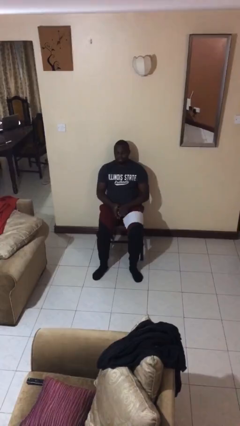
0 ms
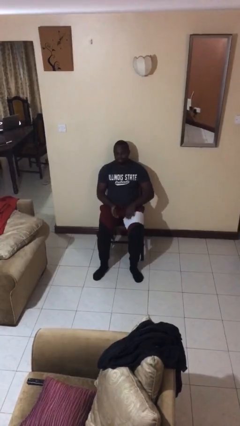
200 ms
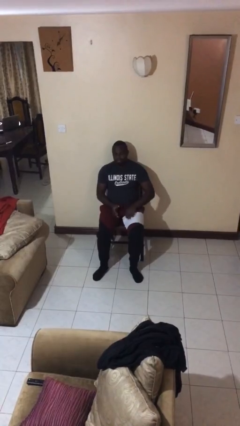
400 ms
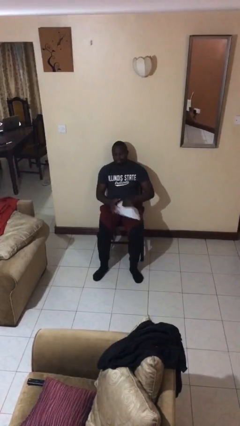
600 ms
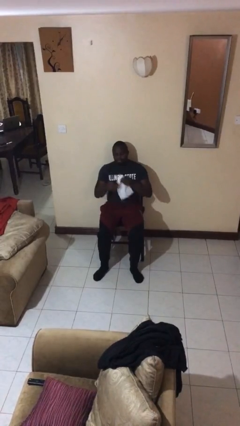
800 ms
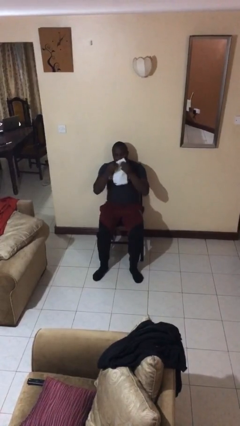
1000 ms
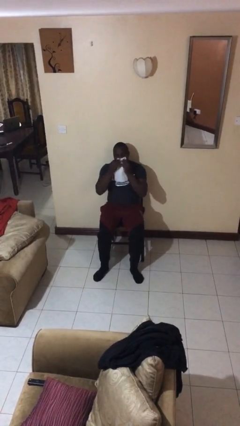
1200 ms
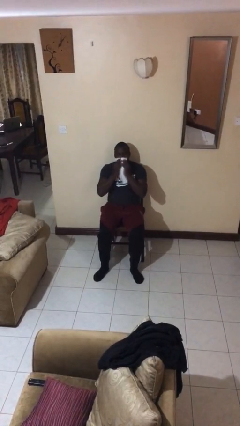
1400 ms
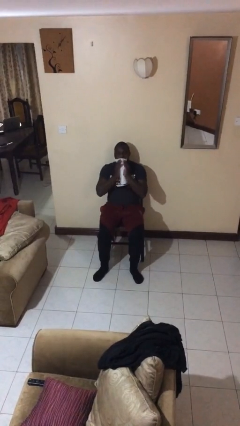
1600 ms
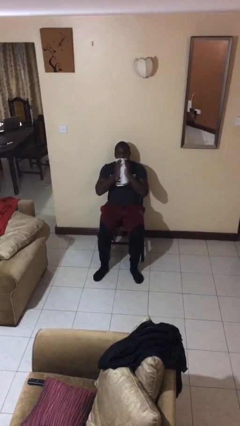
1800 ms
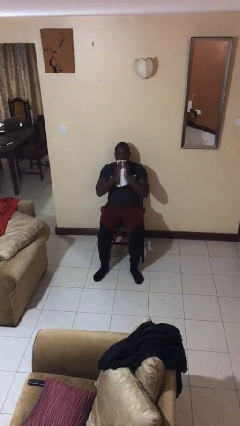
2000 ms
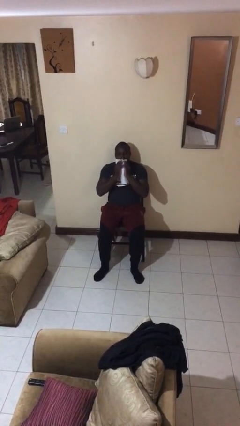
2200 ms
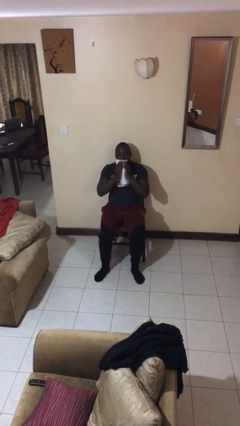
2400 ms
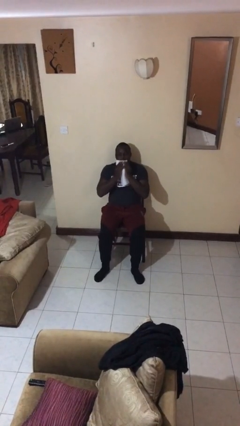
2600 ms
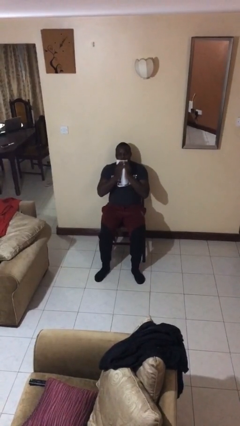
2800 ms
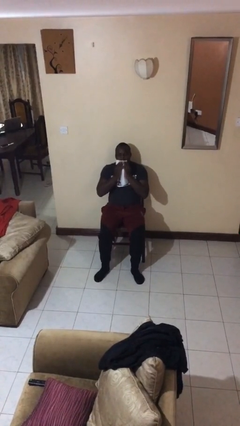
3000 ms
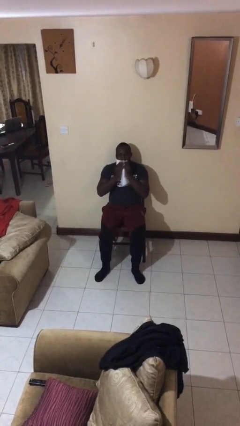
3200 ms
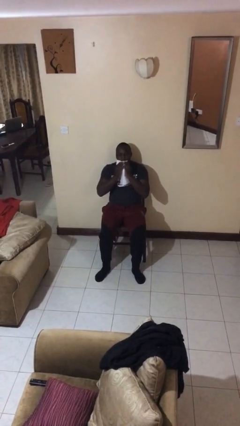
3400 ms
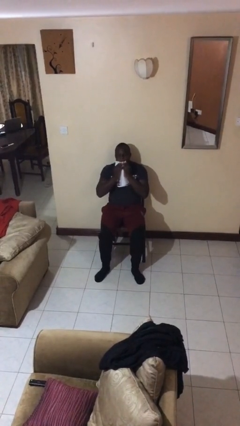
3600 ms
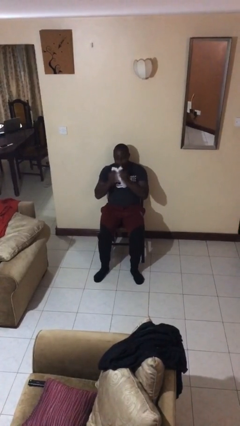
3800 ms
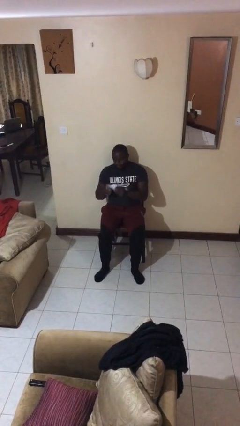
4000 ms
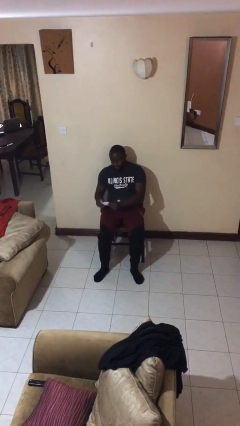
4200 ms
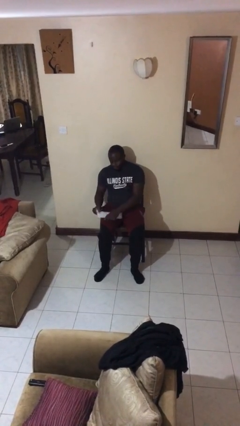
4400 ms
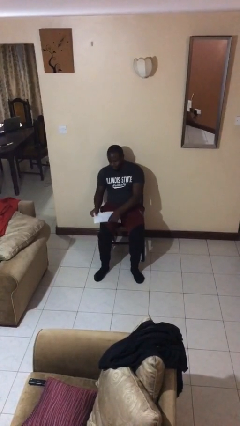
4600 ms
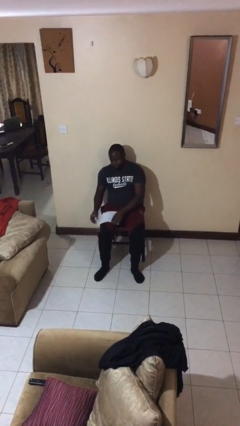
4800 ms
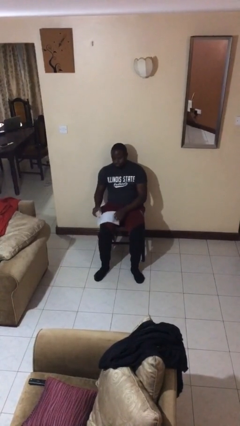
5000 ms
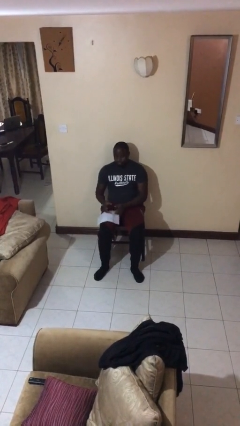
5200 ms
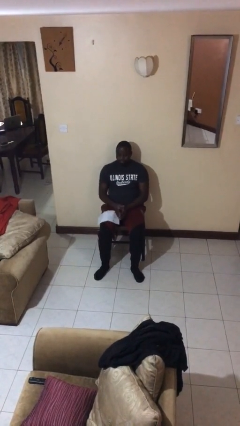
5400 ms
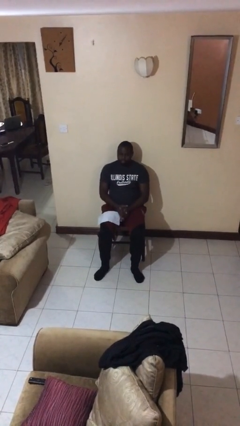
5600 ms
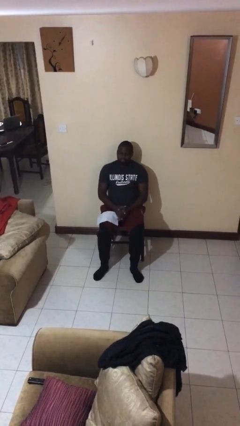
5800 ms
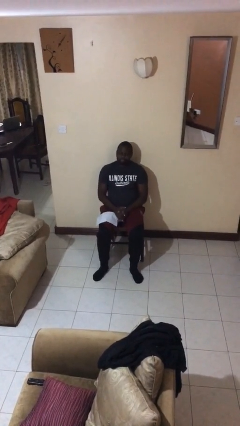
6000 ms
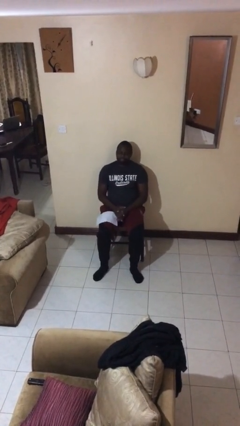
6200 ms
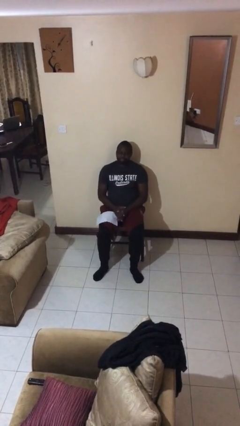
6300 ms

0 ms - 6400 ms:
person wipes mouth with napkin

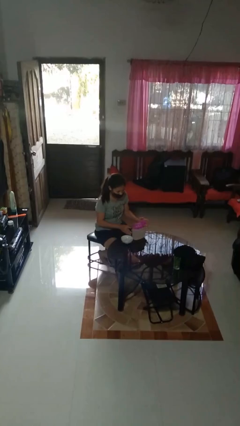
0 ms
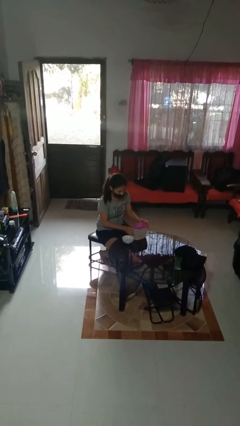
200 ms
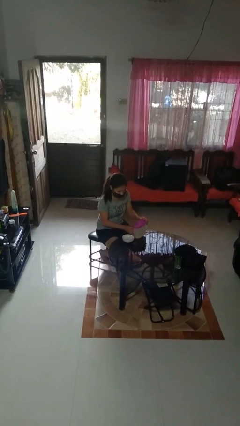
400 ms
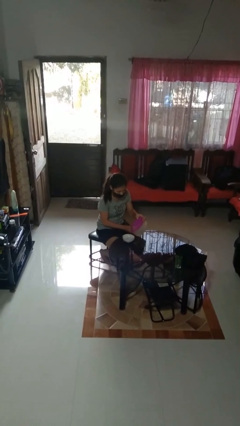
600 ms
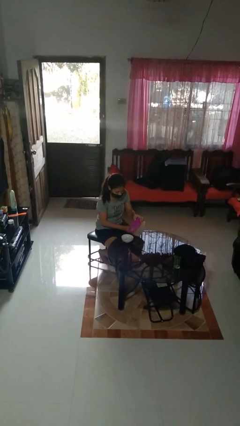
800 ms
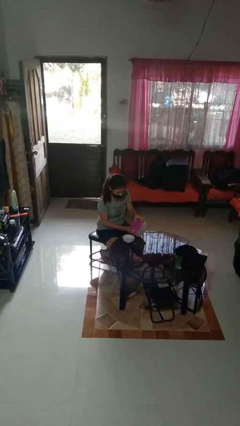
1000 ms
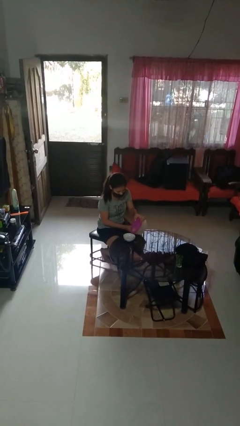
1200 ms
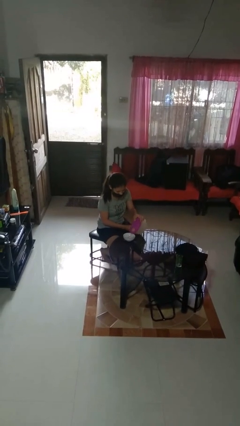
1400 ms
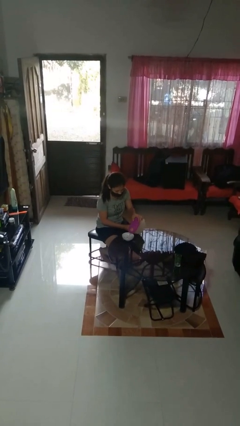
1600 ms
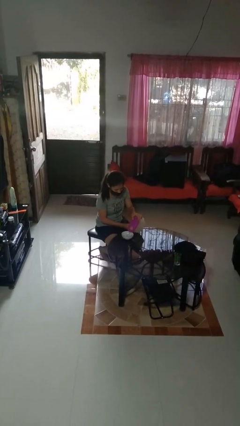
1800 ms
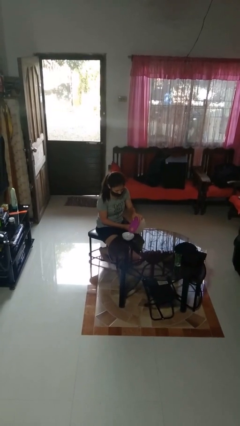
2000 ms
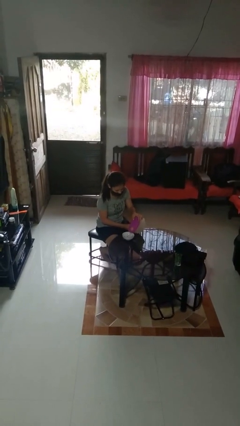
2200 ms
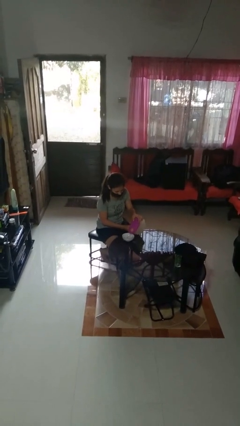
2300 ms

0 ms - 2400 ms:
person pours into bowl

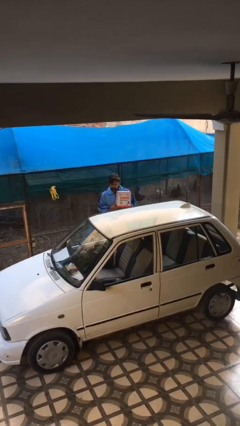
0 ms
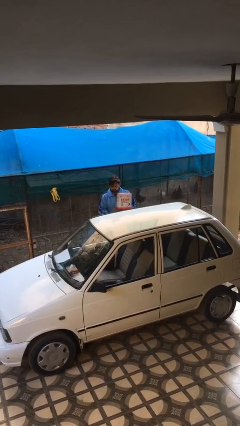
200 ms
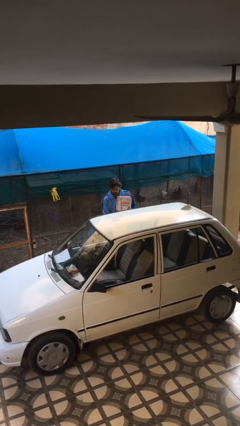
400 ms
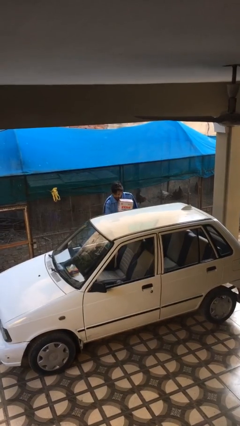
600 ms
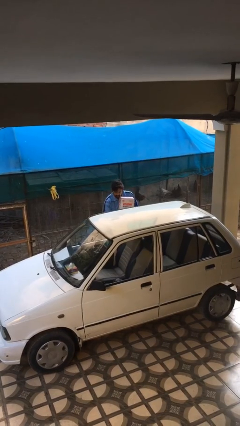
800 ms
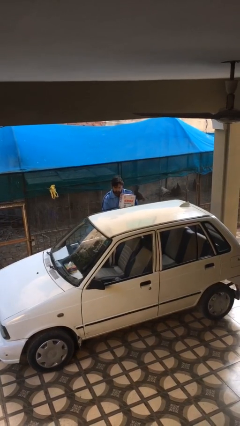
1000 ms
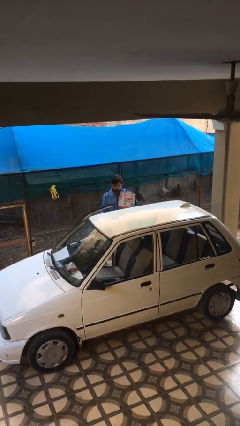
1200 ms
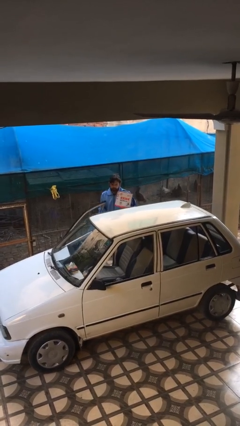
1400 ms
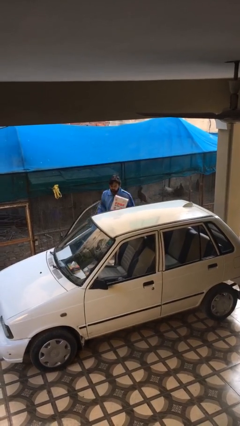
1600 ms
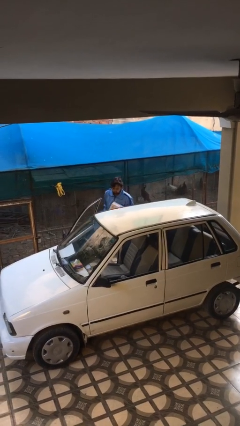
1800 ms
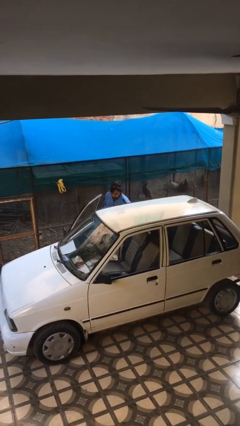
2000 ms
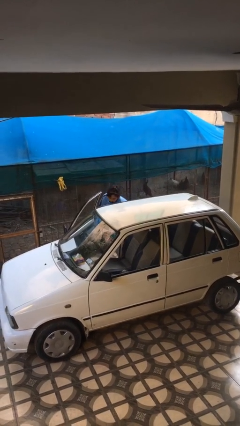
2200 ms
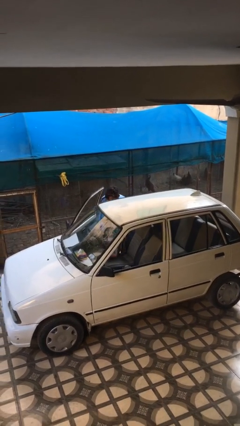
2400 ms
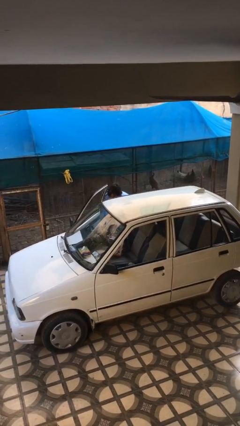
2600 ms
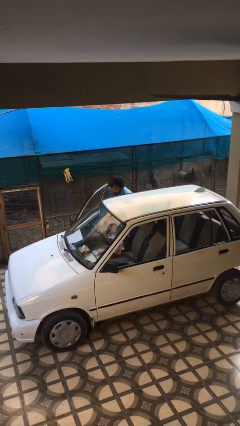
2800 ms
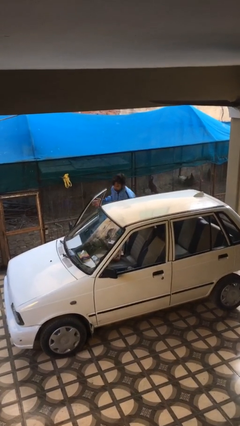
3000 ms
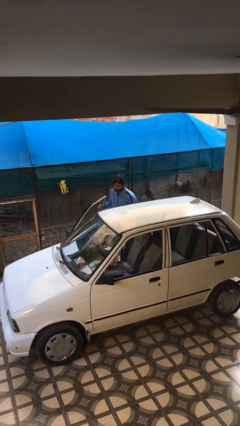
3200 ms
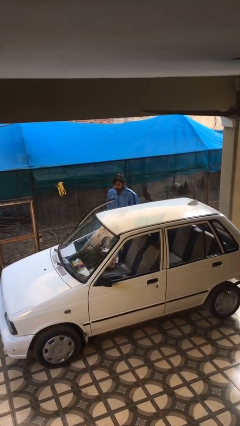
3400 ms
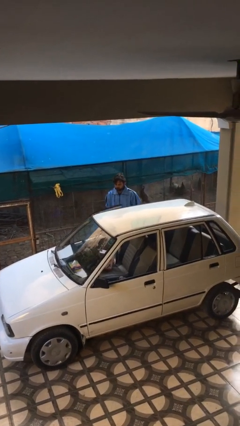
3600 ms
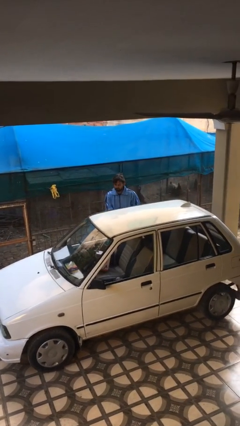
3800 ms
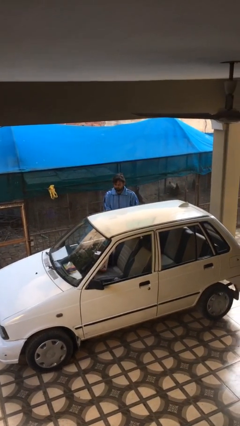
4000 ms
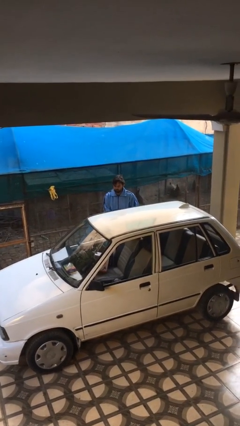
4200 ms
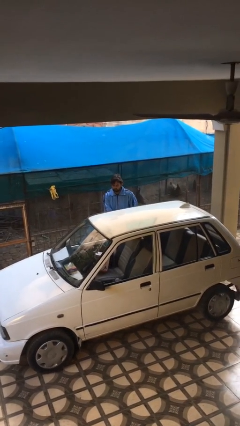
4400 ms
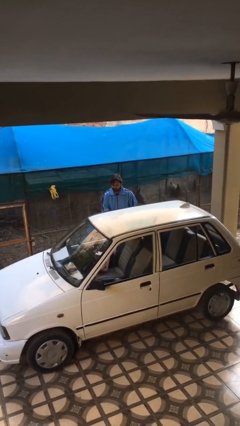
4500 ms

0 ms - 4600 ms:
person loads car

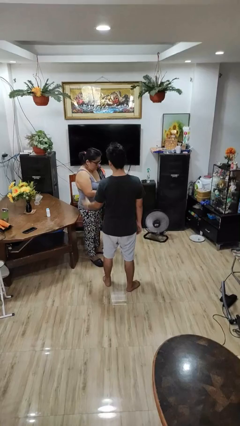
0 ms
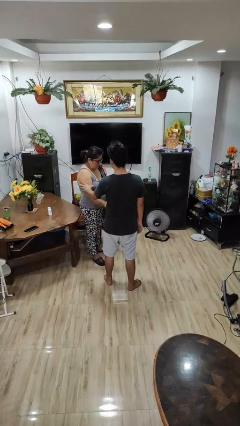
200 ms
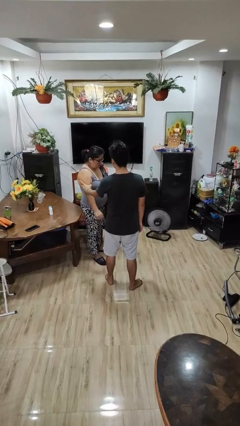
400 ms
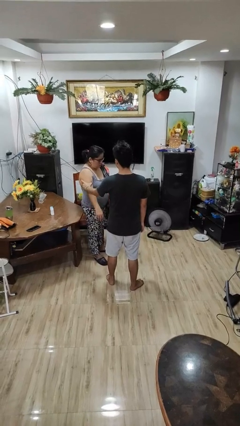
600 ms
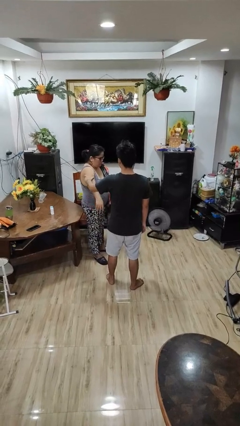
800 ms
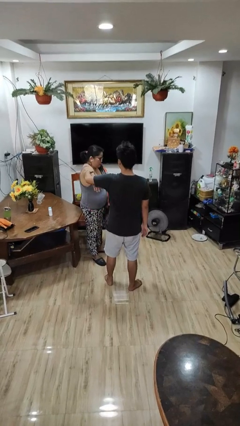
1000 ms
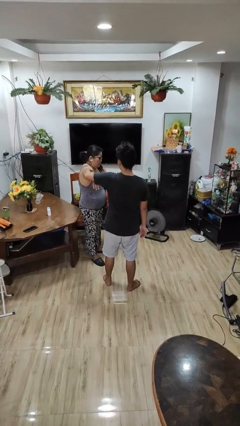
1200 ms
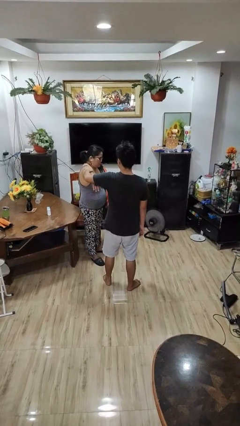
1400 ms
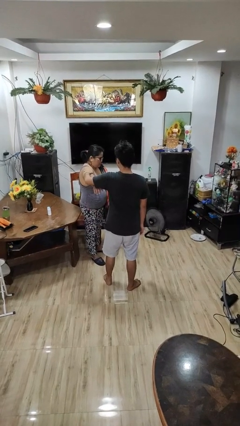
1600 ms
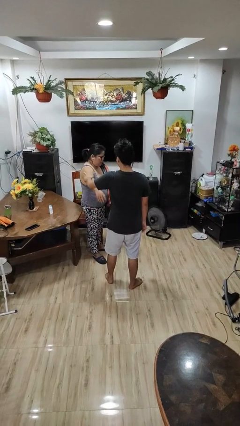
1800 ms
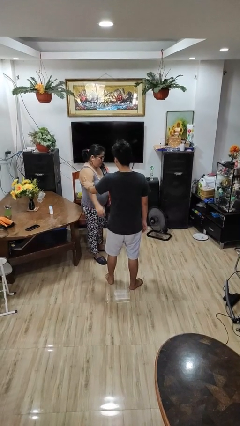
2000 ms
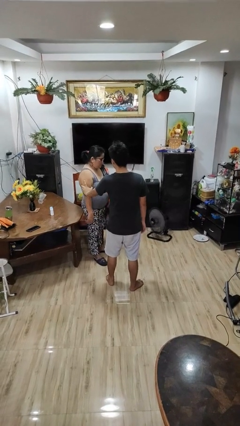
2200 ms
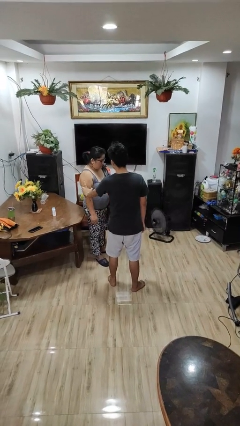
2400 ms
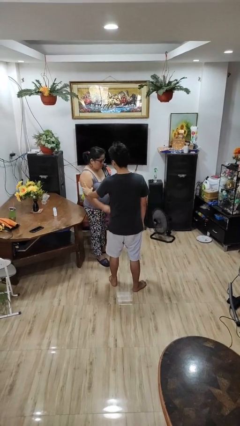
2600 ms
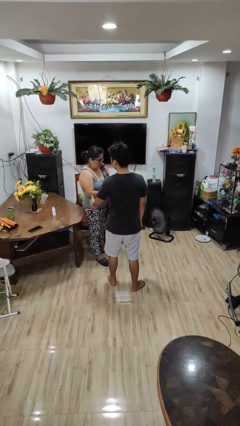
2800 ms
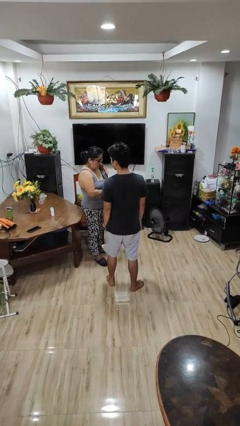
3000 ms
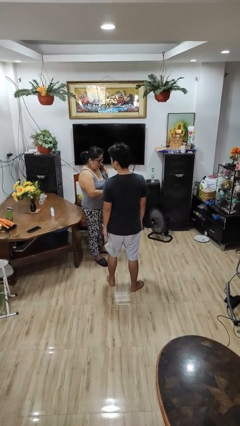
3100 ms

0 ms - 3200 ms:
person grabs person by bicep

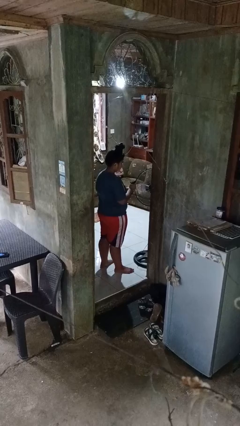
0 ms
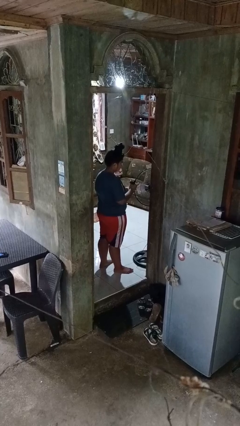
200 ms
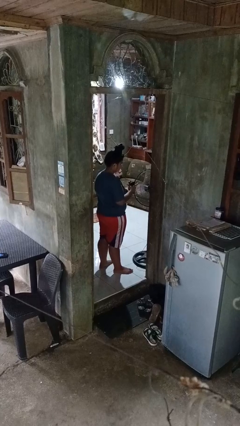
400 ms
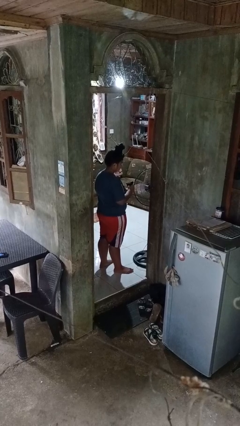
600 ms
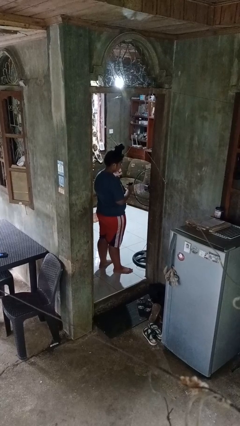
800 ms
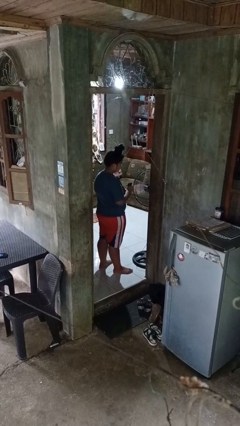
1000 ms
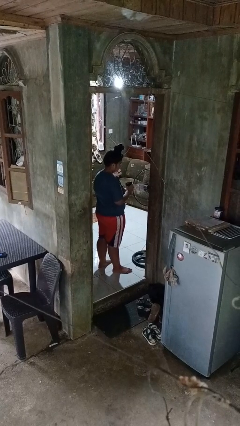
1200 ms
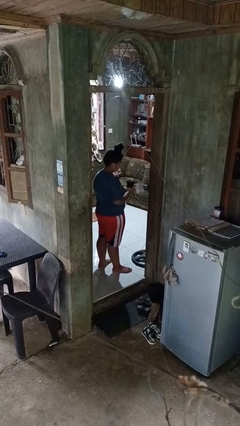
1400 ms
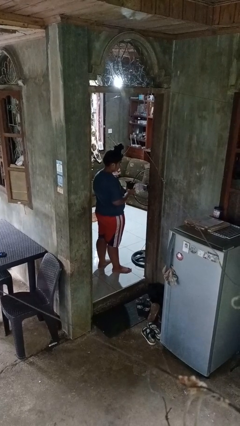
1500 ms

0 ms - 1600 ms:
person squeezes object
